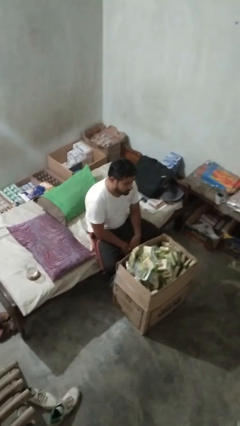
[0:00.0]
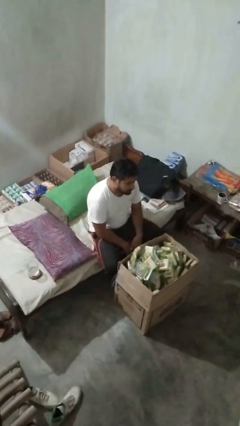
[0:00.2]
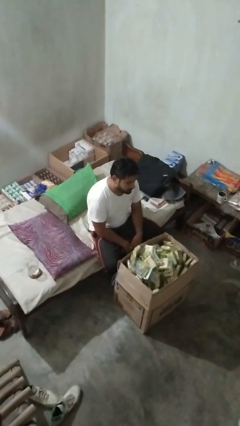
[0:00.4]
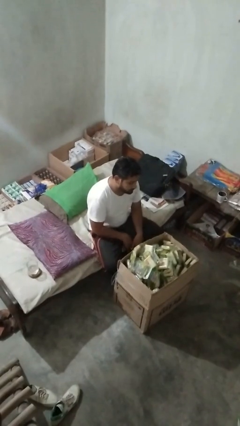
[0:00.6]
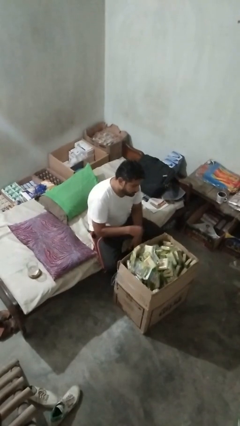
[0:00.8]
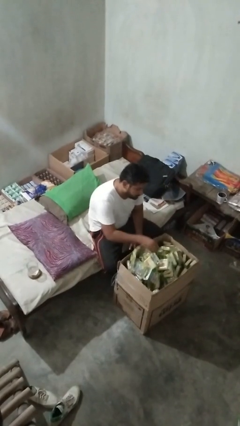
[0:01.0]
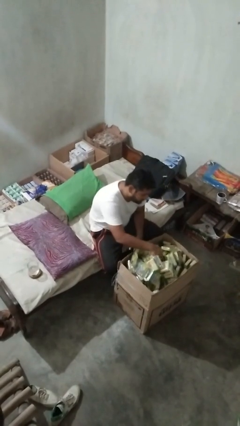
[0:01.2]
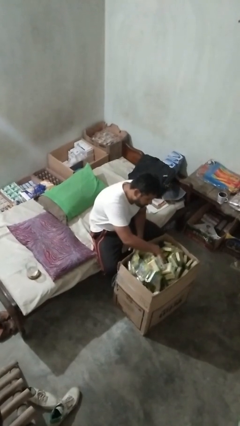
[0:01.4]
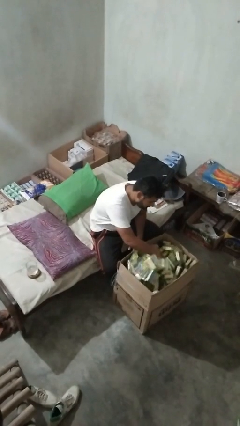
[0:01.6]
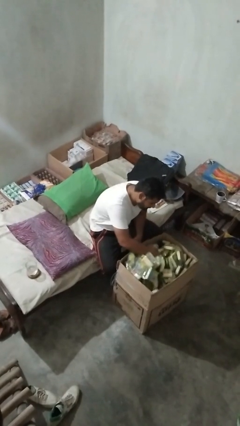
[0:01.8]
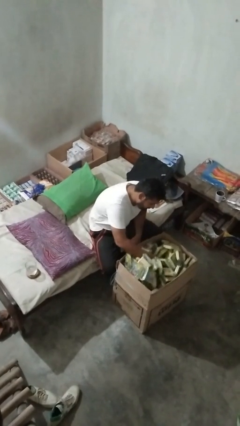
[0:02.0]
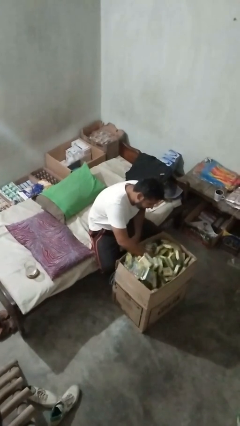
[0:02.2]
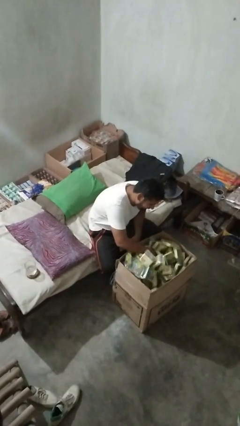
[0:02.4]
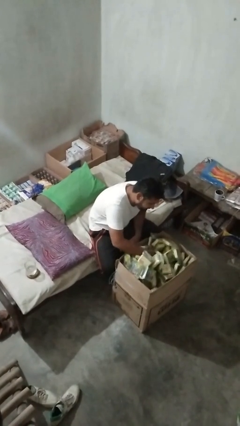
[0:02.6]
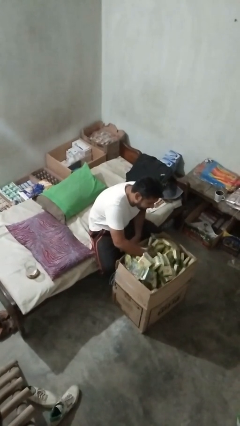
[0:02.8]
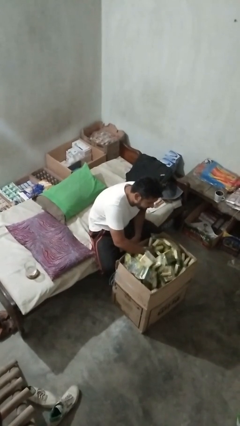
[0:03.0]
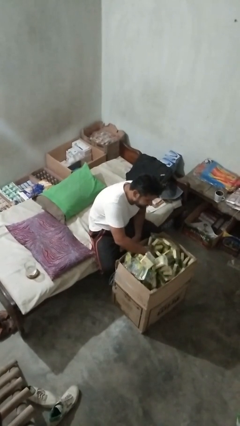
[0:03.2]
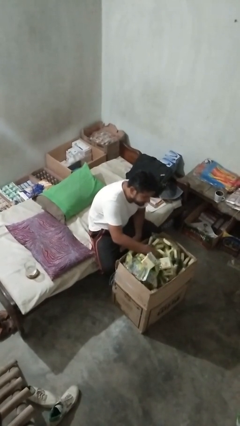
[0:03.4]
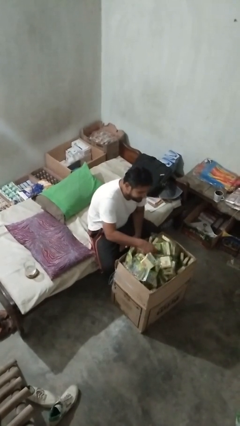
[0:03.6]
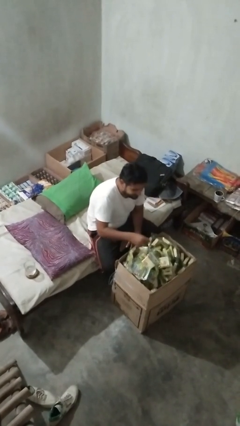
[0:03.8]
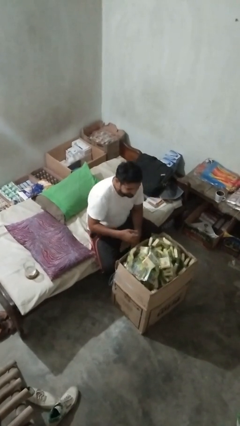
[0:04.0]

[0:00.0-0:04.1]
person searches in box

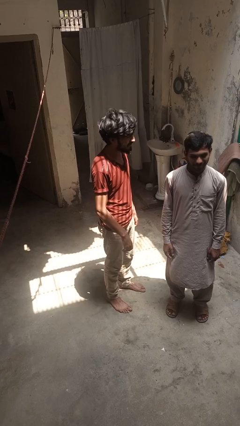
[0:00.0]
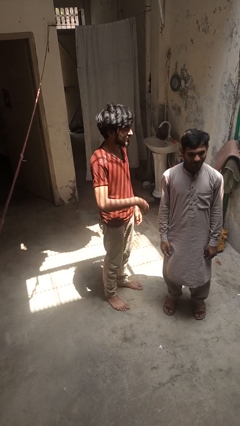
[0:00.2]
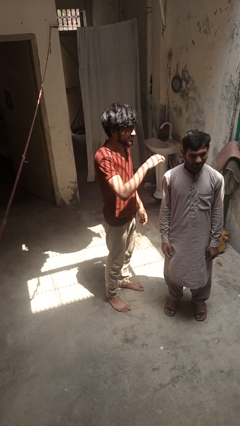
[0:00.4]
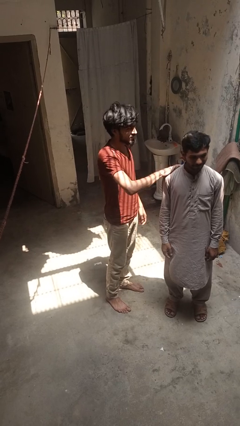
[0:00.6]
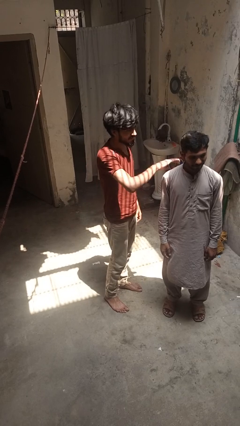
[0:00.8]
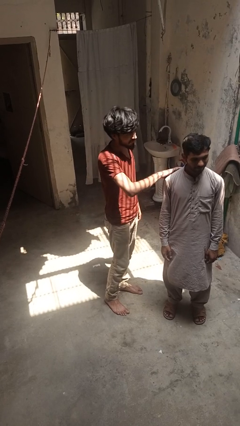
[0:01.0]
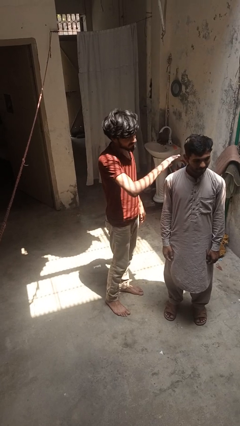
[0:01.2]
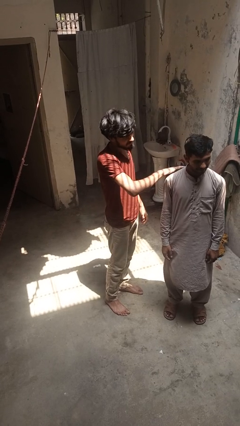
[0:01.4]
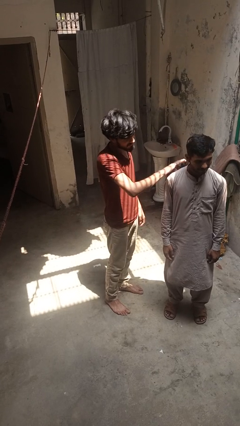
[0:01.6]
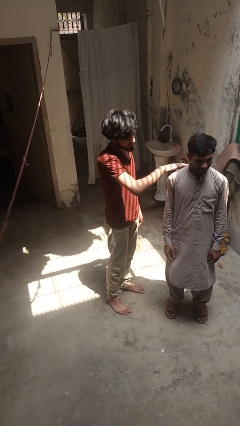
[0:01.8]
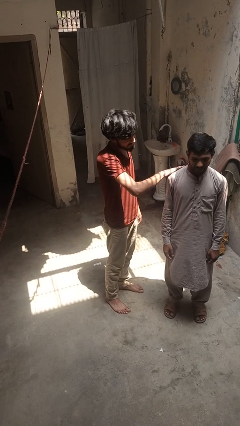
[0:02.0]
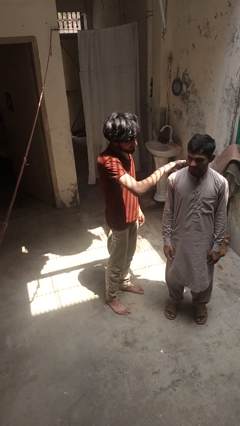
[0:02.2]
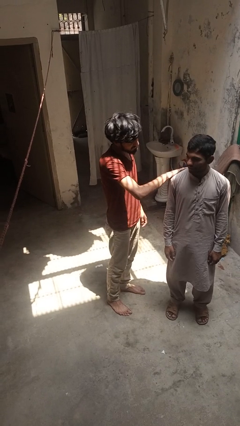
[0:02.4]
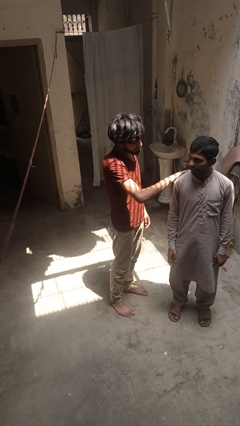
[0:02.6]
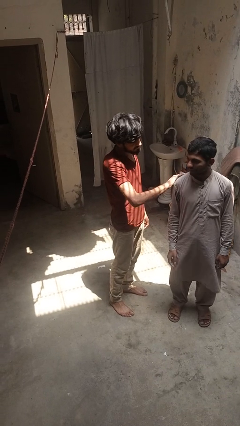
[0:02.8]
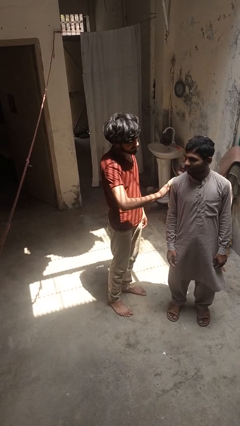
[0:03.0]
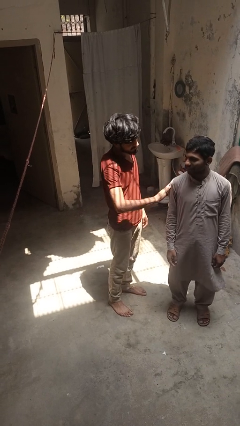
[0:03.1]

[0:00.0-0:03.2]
person pounds shoulders of person

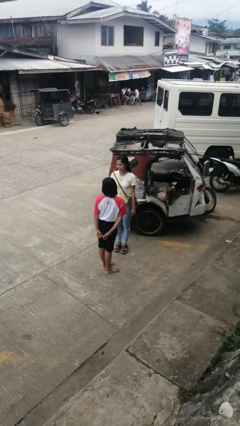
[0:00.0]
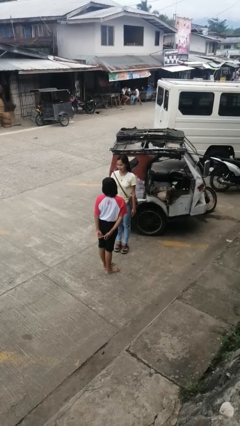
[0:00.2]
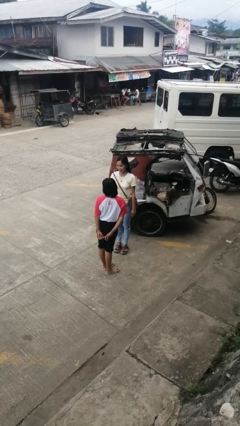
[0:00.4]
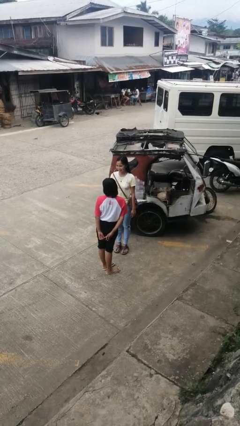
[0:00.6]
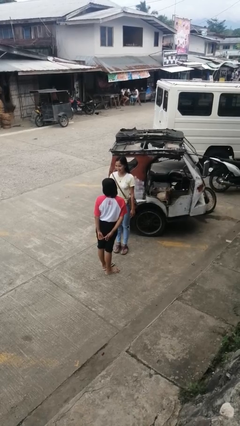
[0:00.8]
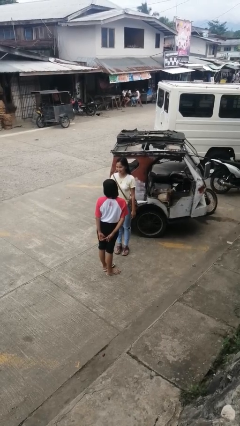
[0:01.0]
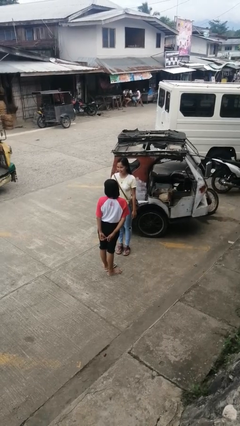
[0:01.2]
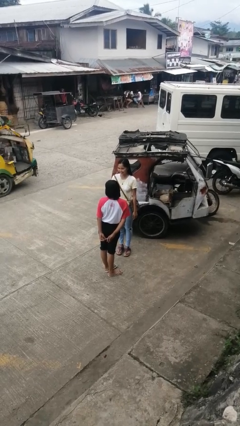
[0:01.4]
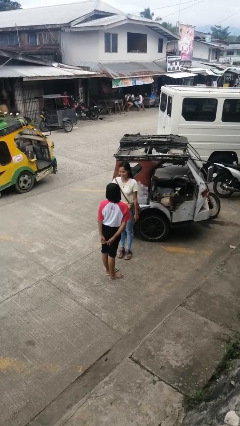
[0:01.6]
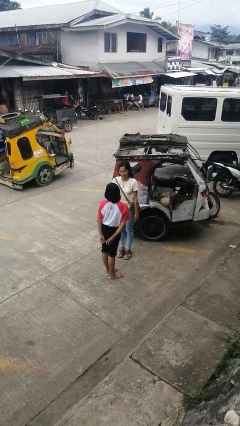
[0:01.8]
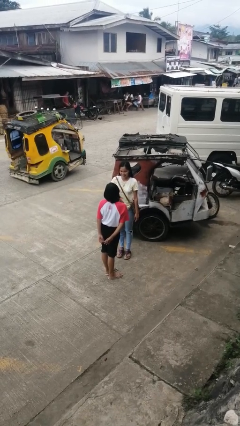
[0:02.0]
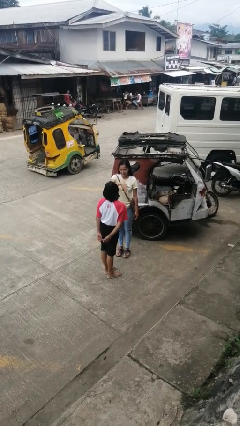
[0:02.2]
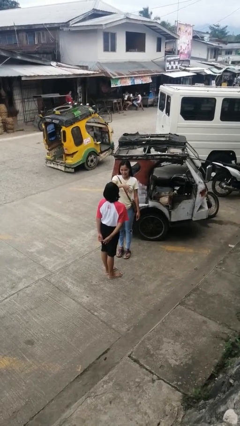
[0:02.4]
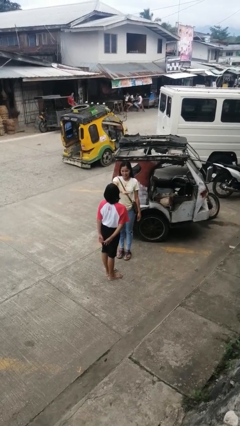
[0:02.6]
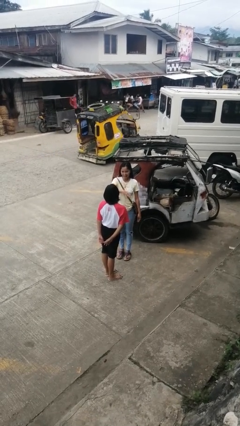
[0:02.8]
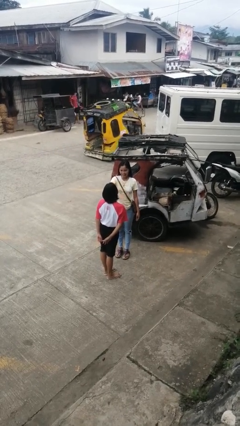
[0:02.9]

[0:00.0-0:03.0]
person shoves person

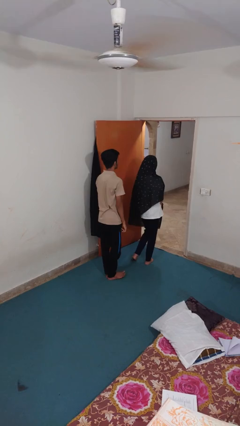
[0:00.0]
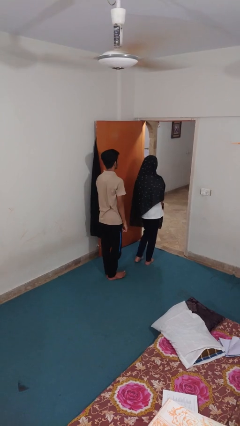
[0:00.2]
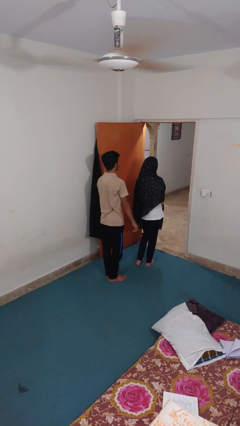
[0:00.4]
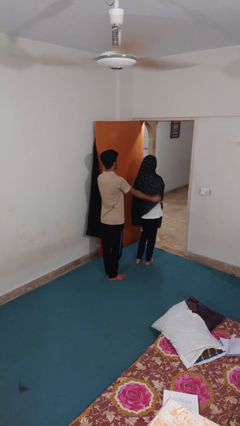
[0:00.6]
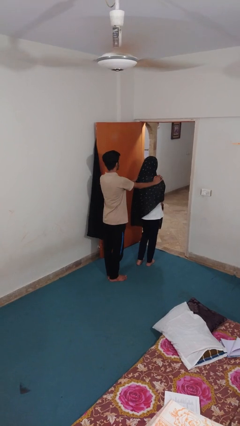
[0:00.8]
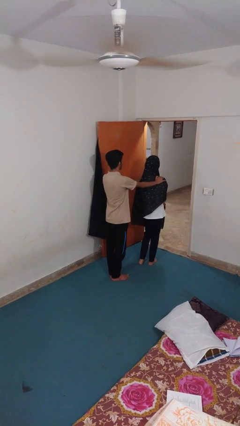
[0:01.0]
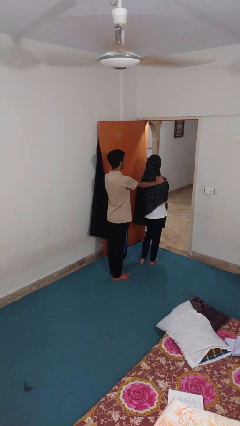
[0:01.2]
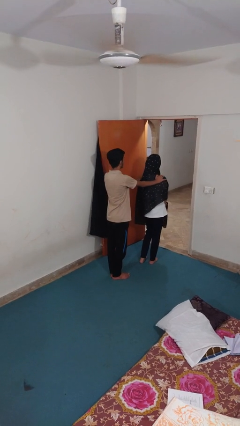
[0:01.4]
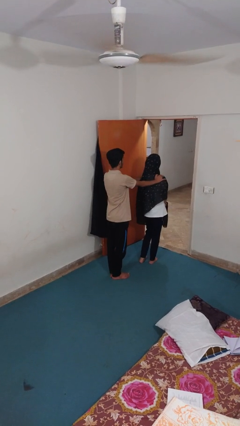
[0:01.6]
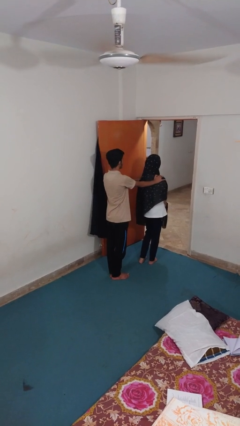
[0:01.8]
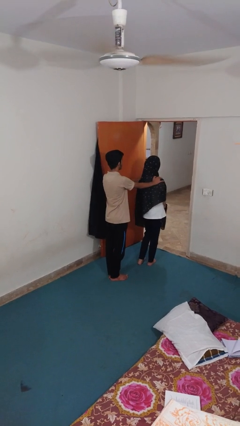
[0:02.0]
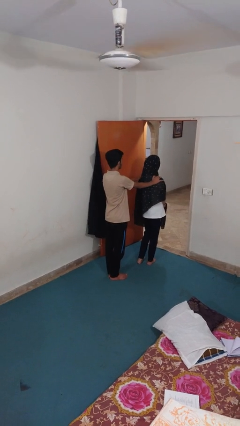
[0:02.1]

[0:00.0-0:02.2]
person grabs person by shoulder

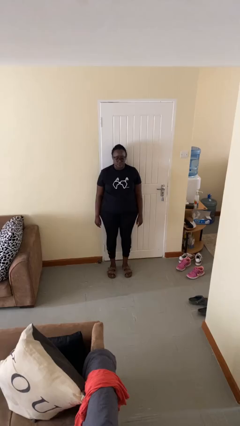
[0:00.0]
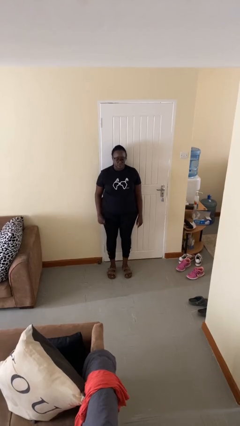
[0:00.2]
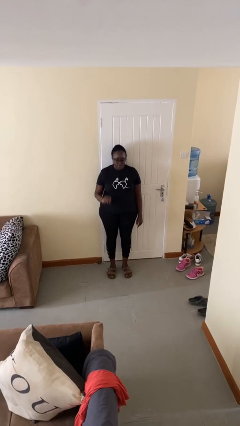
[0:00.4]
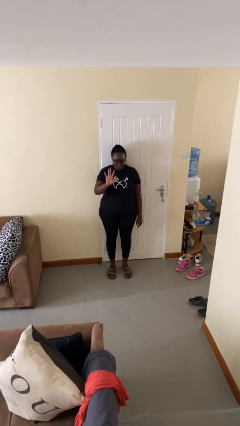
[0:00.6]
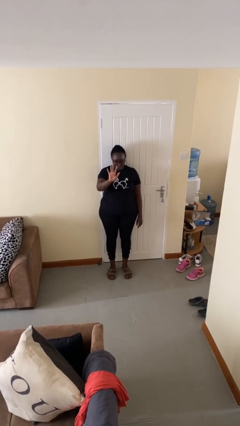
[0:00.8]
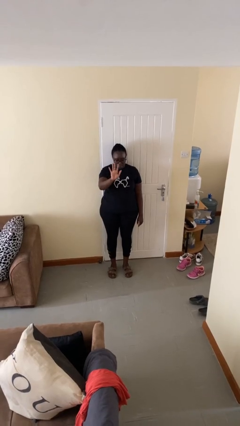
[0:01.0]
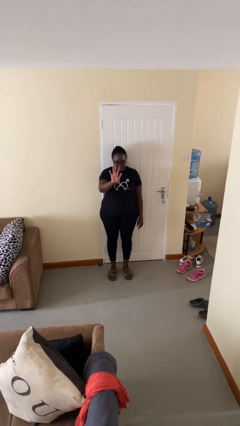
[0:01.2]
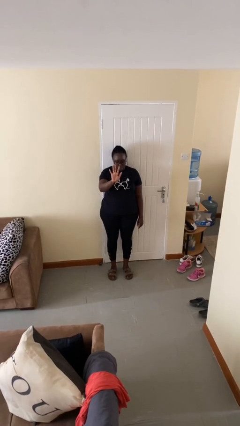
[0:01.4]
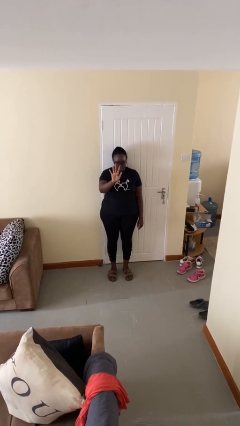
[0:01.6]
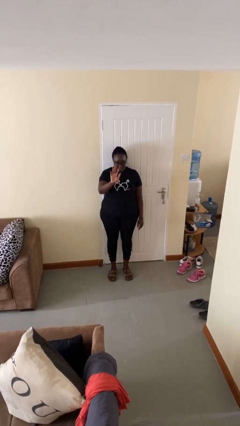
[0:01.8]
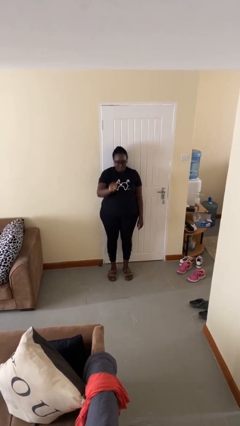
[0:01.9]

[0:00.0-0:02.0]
person gestures number five

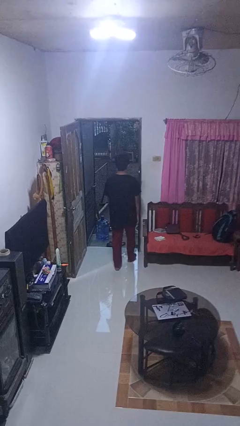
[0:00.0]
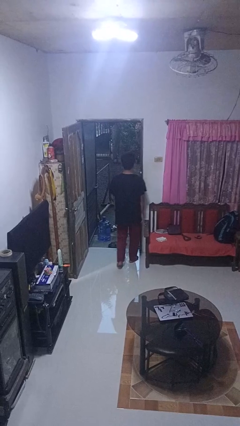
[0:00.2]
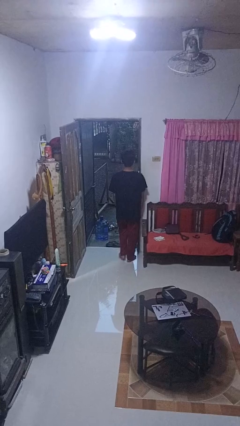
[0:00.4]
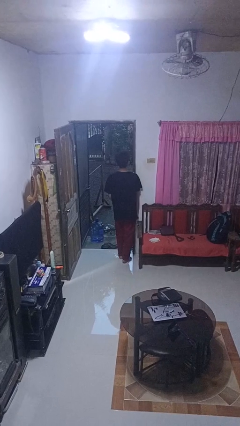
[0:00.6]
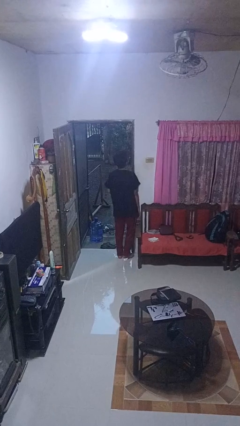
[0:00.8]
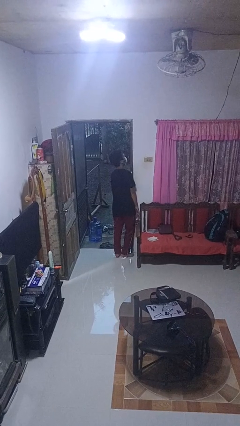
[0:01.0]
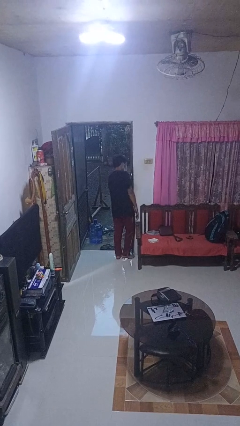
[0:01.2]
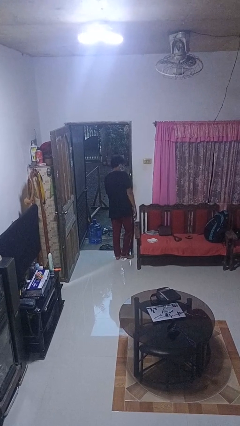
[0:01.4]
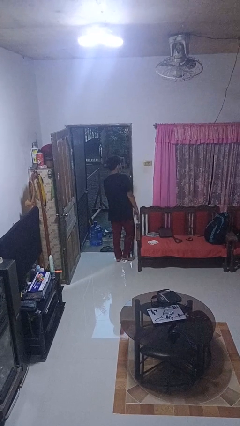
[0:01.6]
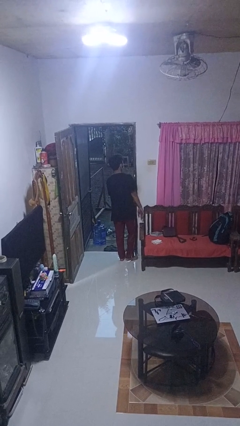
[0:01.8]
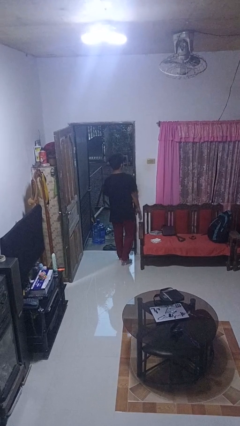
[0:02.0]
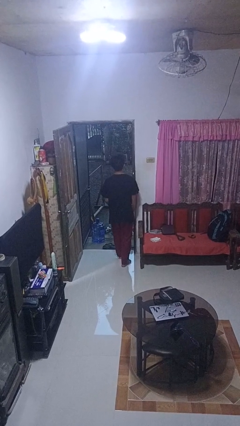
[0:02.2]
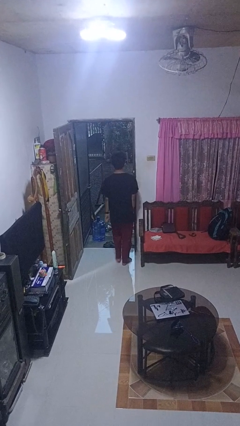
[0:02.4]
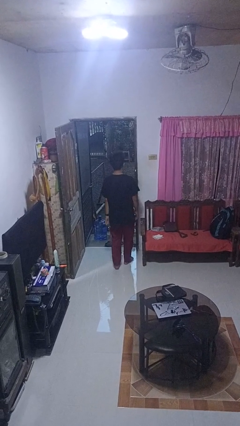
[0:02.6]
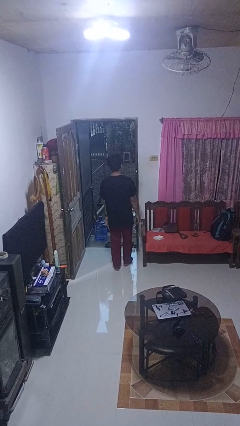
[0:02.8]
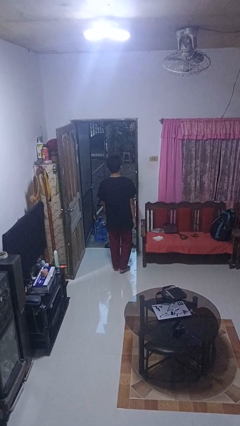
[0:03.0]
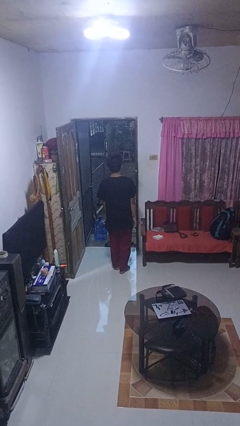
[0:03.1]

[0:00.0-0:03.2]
person bumps into wall
